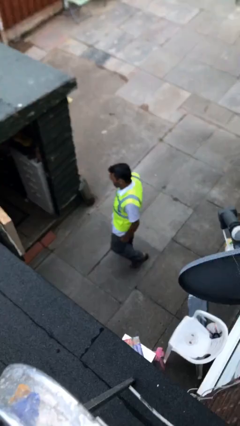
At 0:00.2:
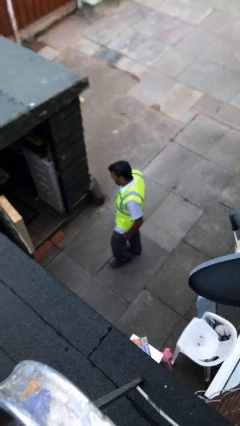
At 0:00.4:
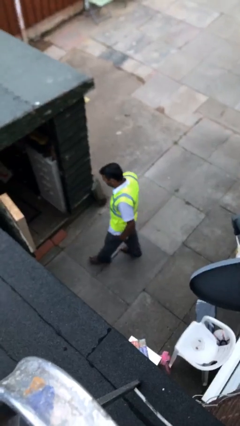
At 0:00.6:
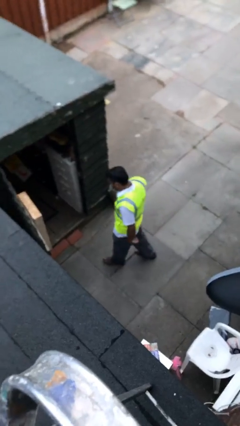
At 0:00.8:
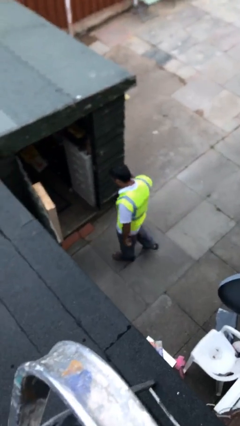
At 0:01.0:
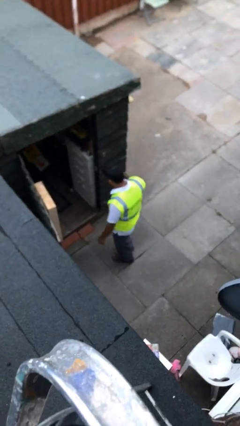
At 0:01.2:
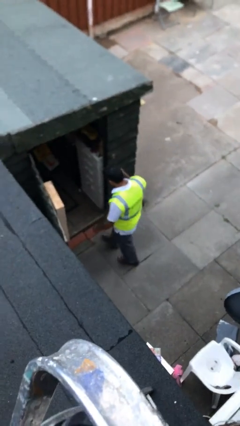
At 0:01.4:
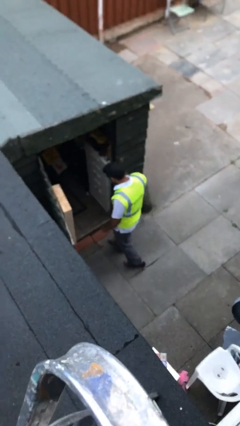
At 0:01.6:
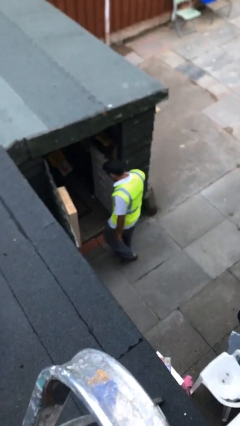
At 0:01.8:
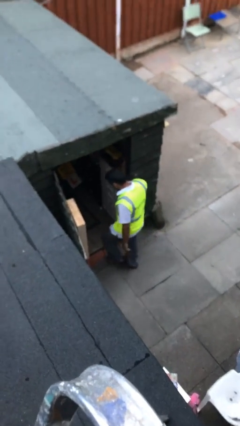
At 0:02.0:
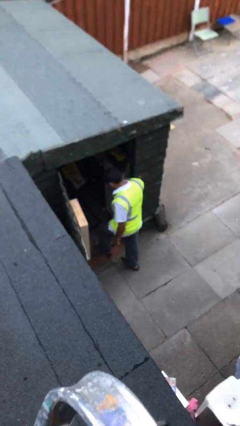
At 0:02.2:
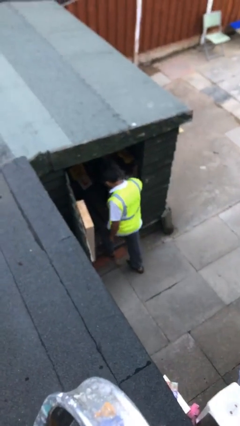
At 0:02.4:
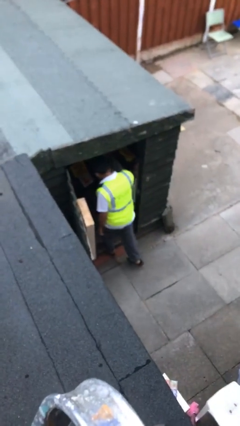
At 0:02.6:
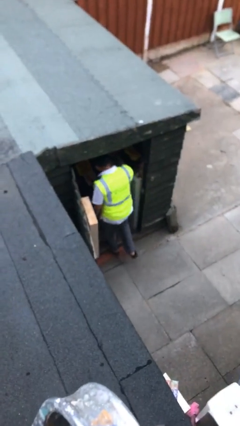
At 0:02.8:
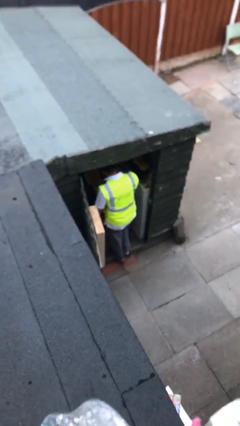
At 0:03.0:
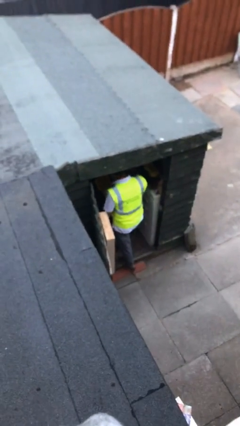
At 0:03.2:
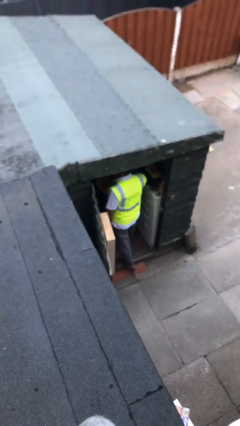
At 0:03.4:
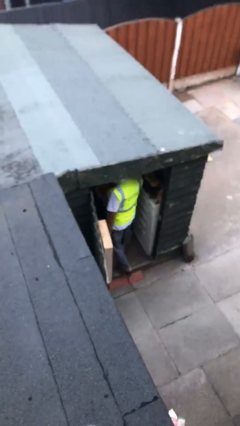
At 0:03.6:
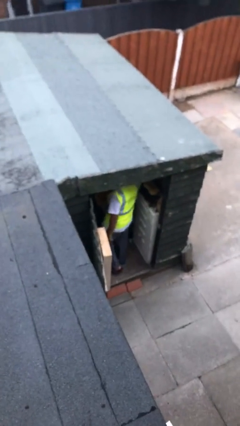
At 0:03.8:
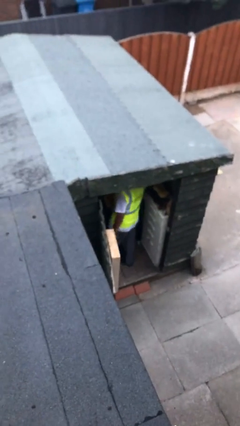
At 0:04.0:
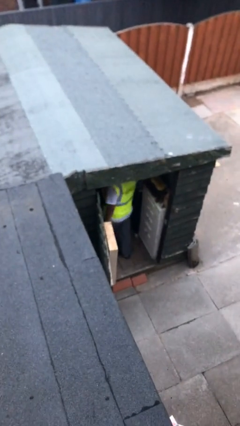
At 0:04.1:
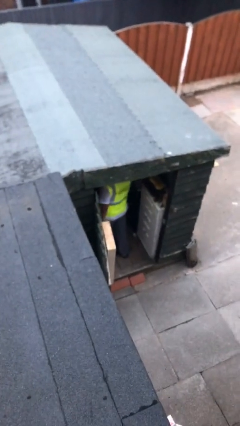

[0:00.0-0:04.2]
person exits scene through structure

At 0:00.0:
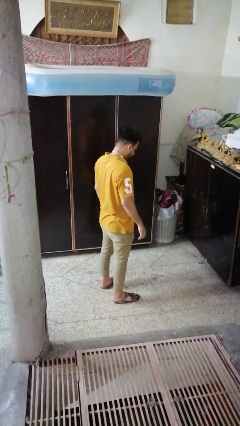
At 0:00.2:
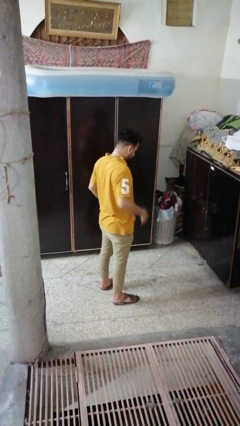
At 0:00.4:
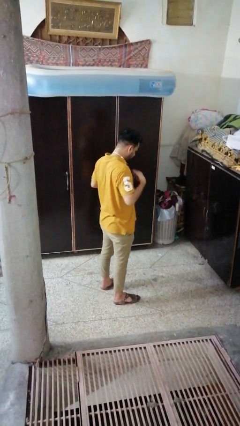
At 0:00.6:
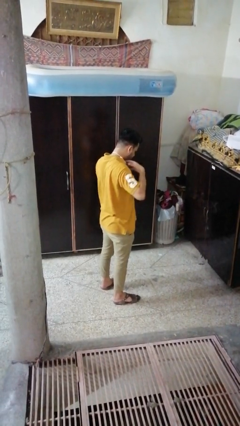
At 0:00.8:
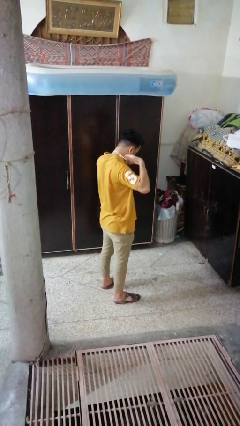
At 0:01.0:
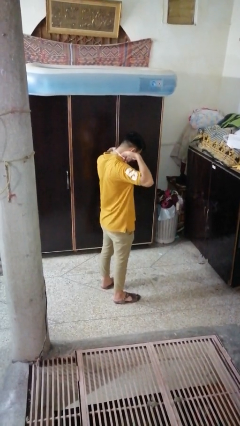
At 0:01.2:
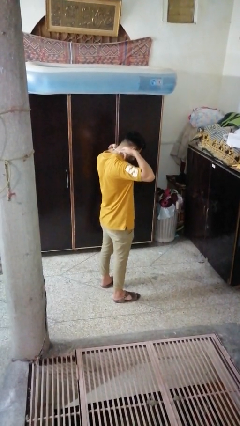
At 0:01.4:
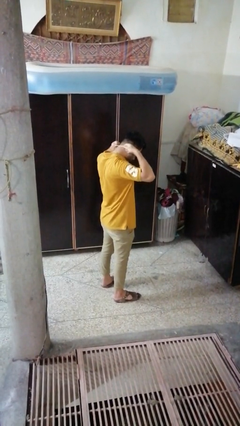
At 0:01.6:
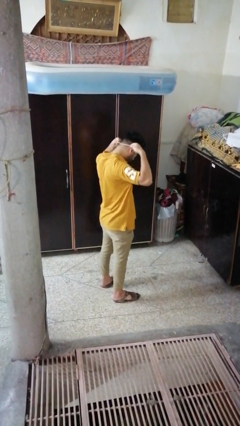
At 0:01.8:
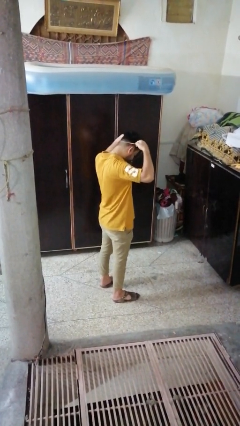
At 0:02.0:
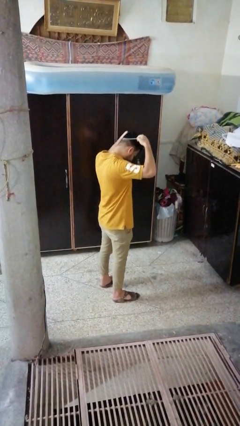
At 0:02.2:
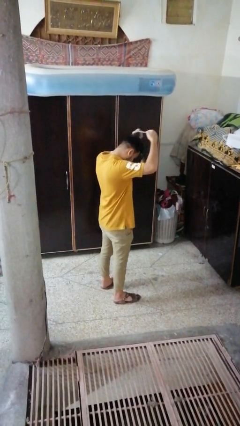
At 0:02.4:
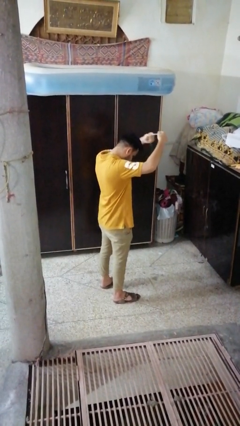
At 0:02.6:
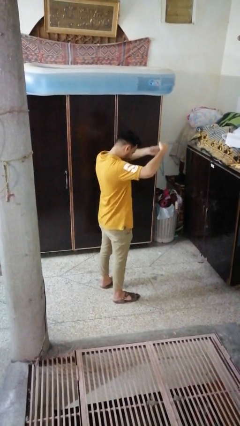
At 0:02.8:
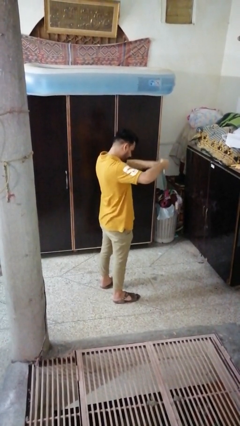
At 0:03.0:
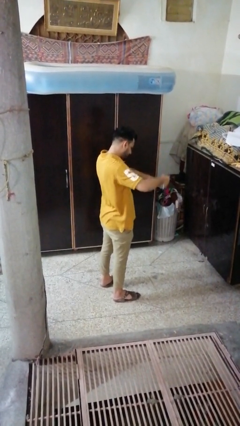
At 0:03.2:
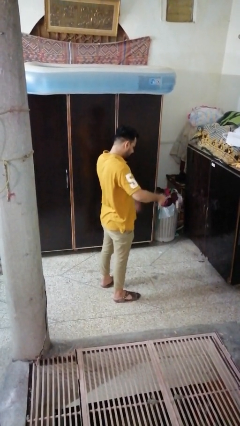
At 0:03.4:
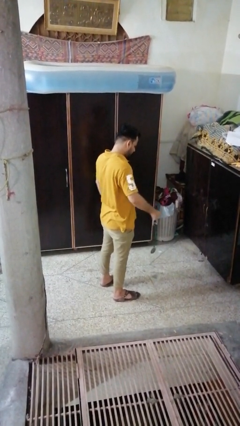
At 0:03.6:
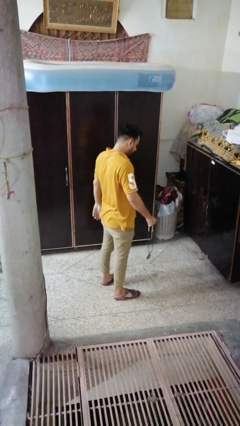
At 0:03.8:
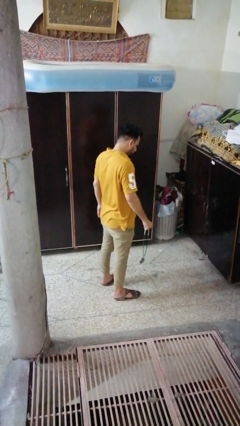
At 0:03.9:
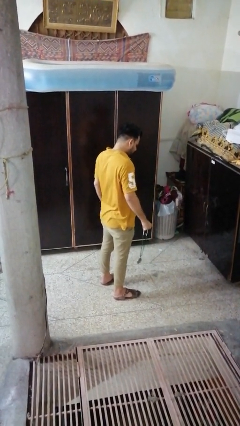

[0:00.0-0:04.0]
person takes off necklace

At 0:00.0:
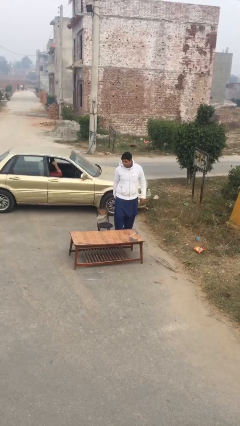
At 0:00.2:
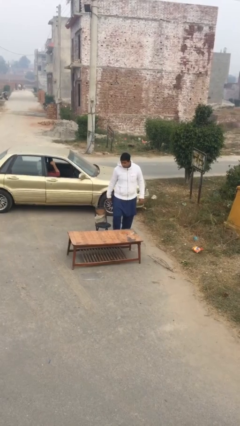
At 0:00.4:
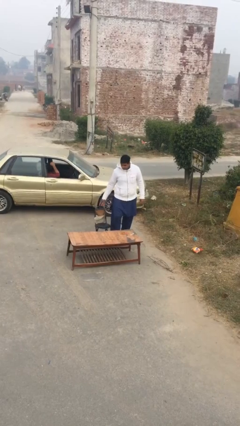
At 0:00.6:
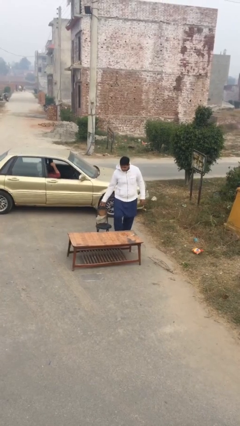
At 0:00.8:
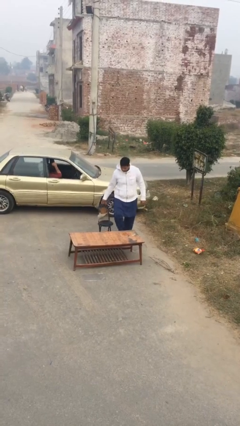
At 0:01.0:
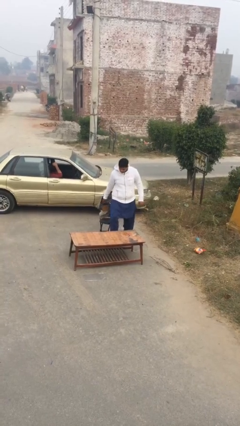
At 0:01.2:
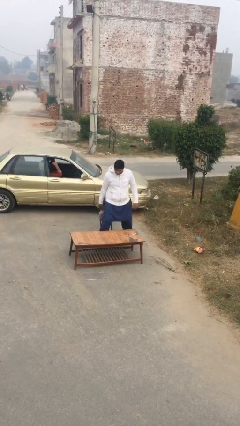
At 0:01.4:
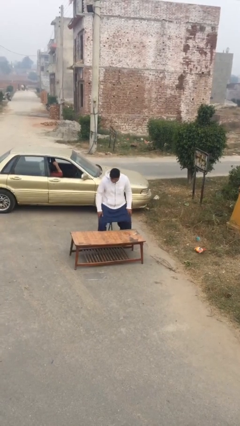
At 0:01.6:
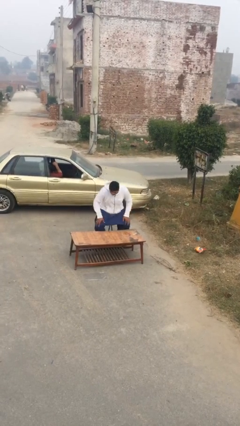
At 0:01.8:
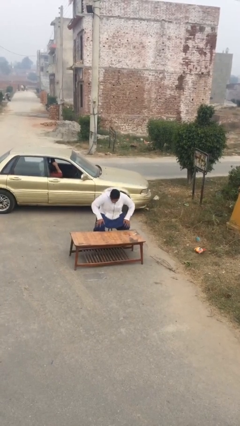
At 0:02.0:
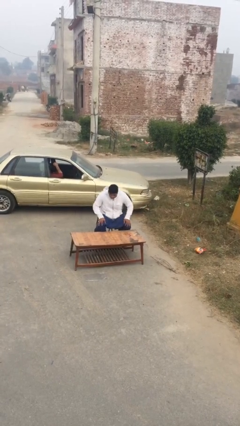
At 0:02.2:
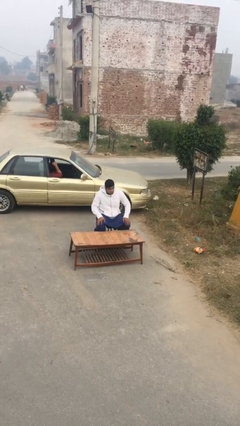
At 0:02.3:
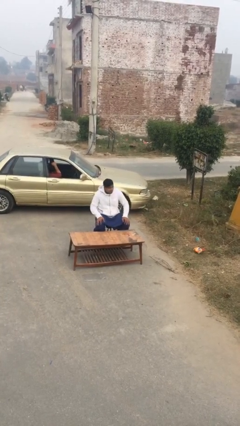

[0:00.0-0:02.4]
person sits down

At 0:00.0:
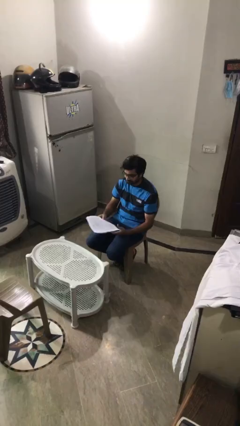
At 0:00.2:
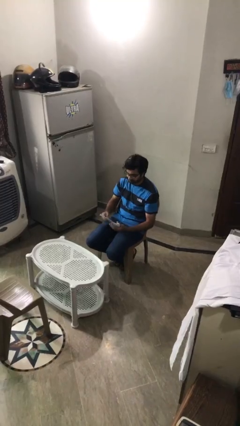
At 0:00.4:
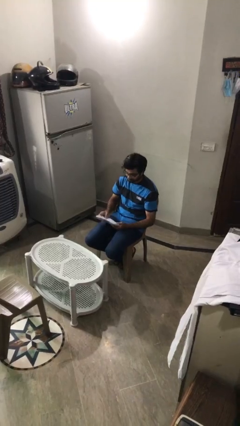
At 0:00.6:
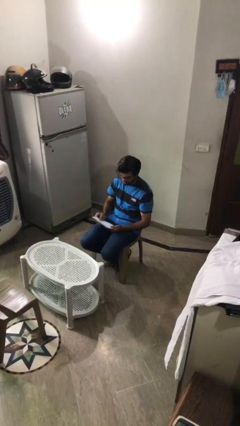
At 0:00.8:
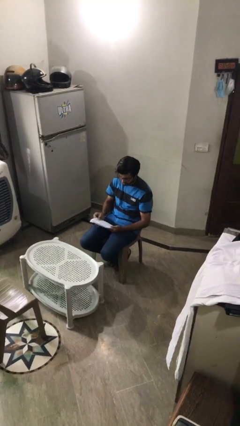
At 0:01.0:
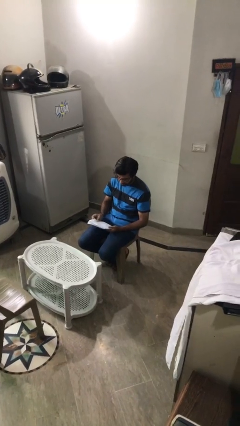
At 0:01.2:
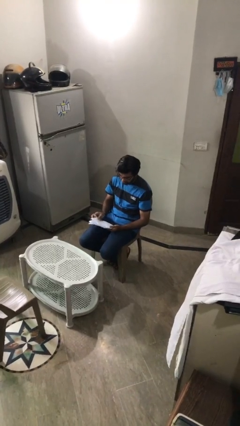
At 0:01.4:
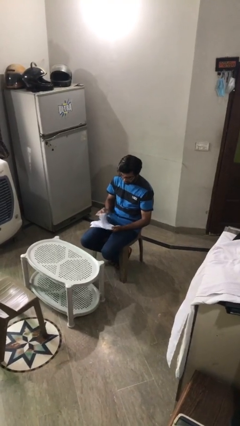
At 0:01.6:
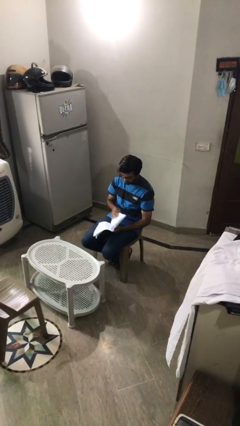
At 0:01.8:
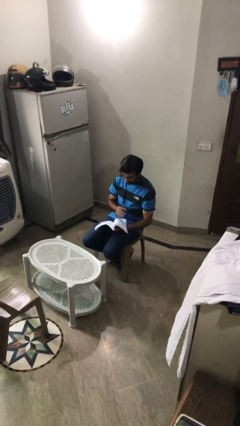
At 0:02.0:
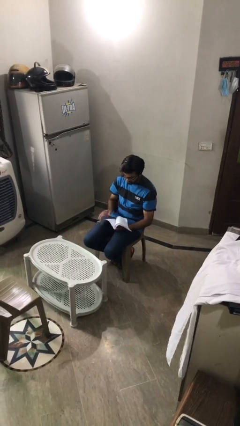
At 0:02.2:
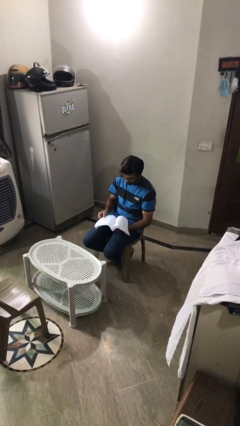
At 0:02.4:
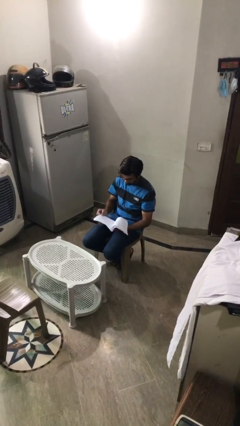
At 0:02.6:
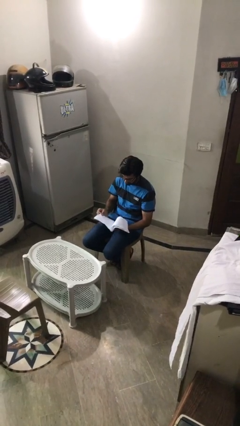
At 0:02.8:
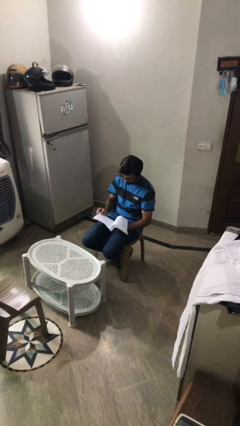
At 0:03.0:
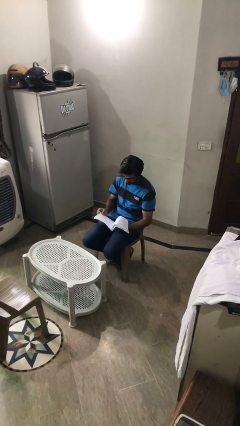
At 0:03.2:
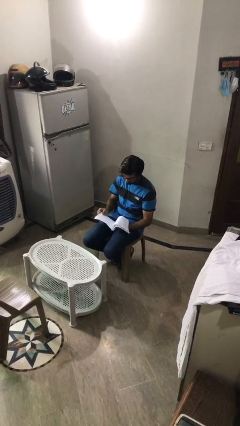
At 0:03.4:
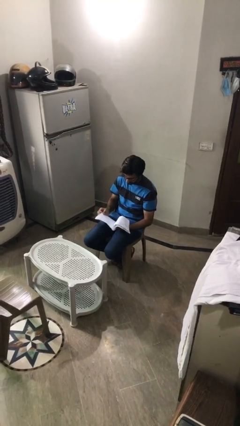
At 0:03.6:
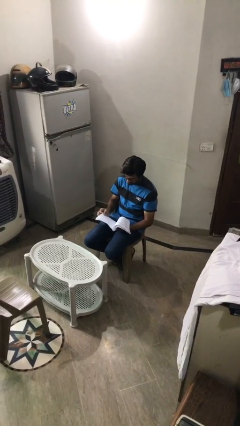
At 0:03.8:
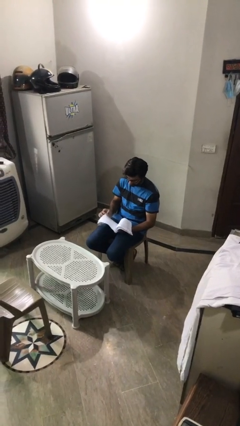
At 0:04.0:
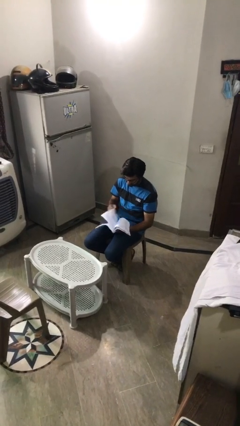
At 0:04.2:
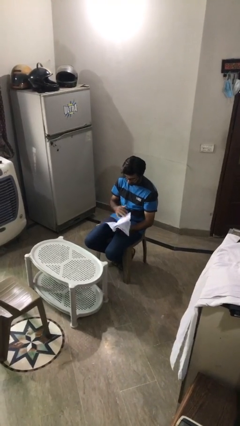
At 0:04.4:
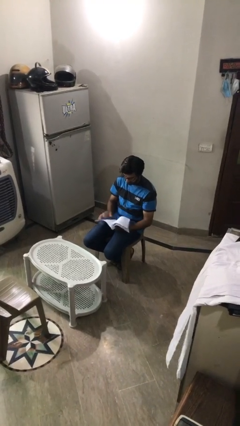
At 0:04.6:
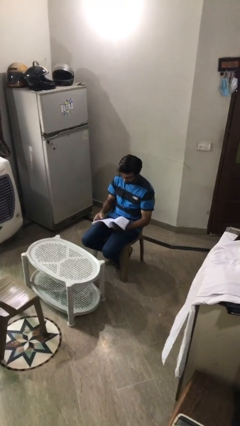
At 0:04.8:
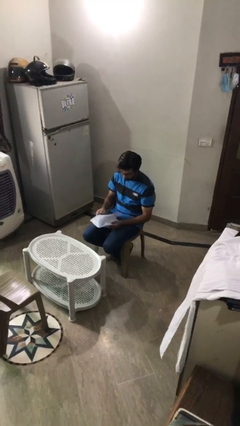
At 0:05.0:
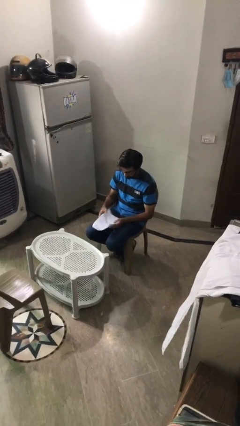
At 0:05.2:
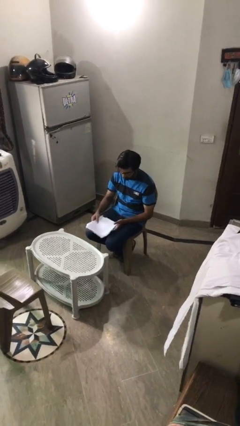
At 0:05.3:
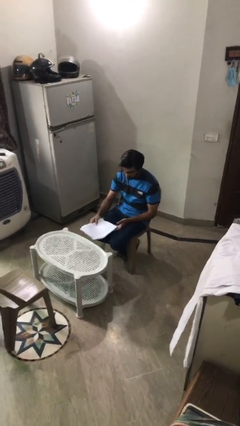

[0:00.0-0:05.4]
person reads document

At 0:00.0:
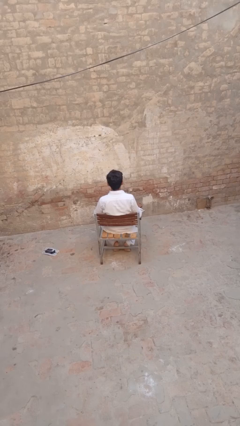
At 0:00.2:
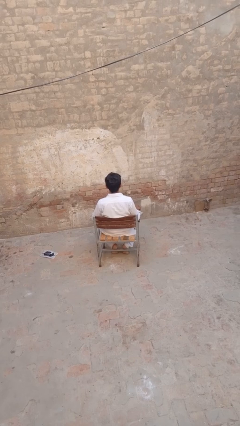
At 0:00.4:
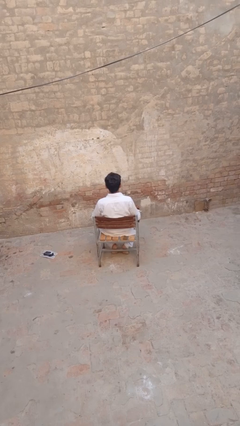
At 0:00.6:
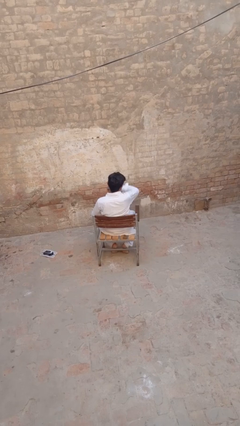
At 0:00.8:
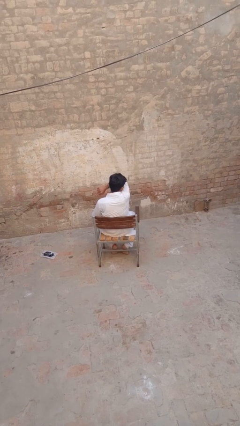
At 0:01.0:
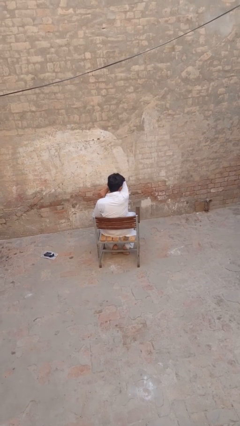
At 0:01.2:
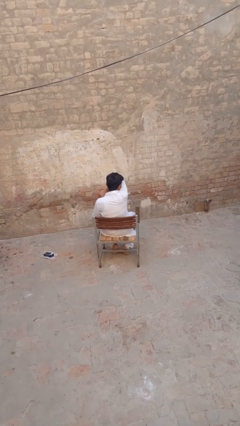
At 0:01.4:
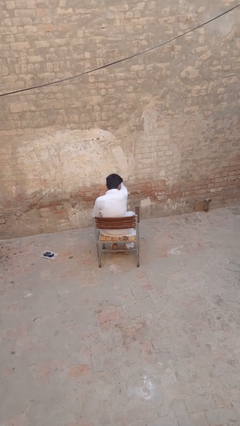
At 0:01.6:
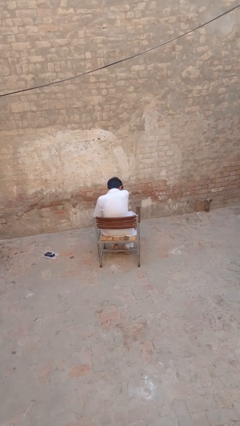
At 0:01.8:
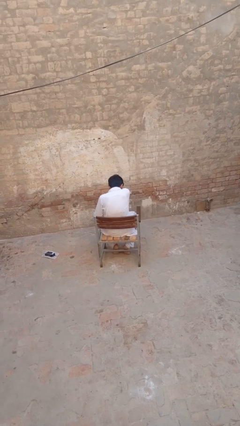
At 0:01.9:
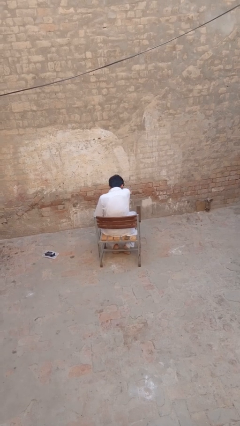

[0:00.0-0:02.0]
person sneezes into arm
